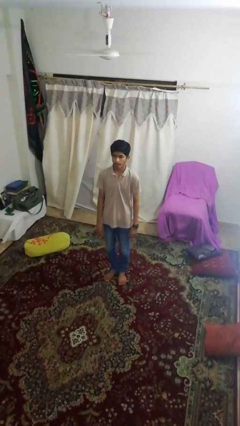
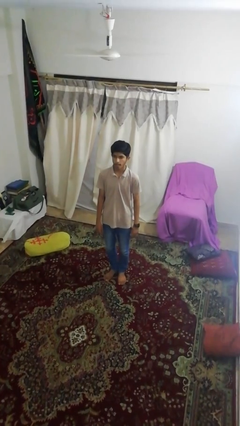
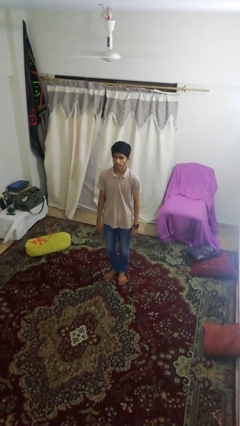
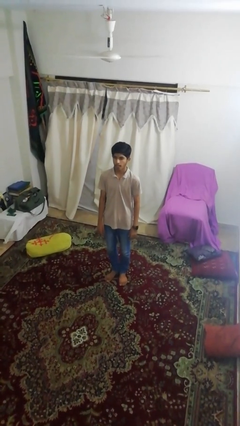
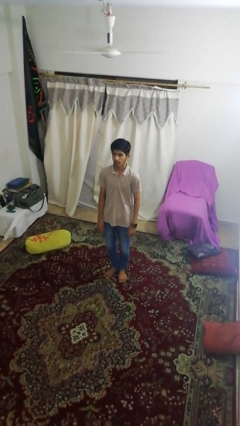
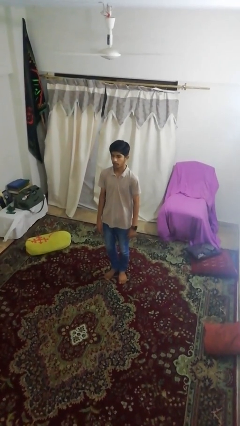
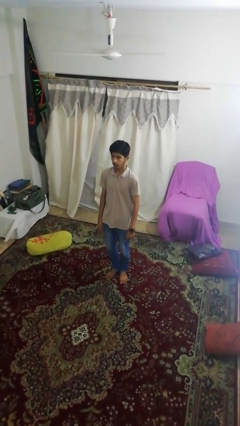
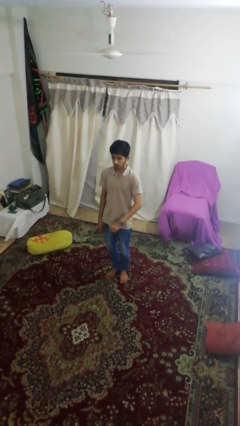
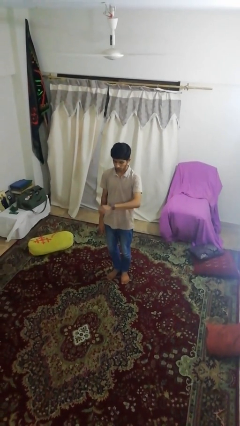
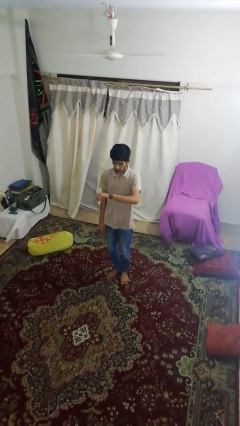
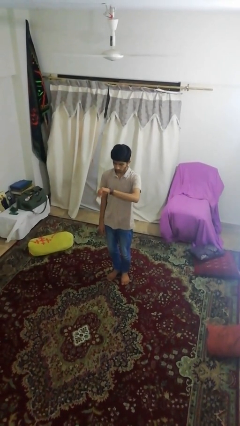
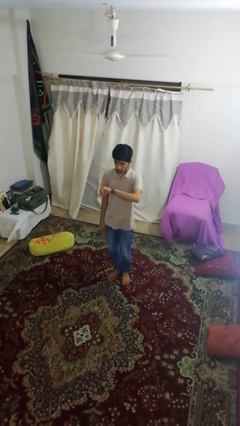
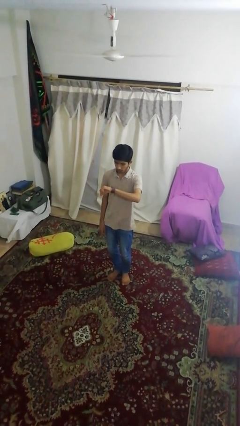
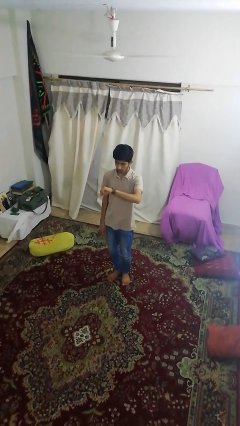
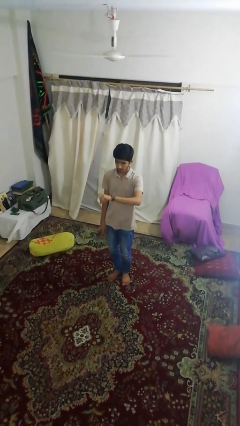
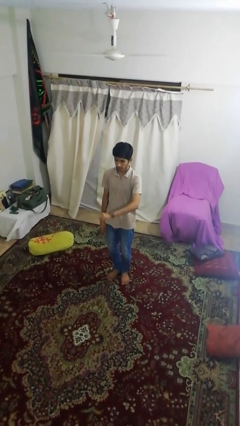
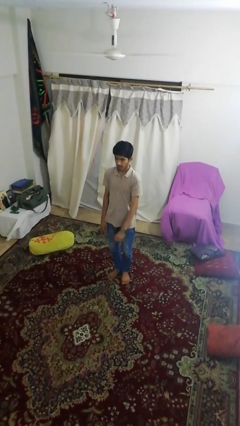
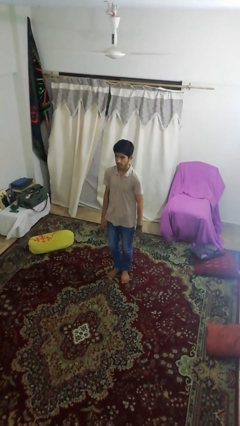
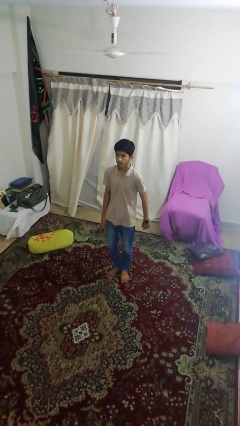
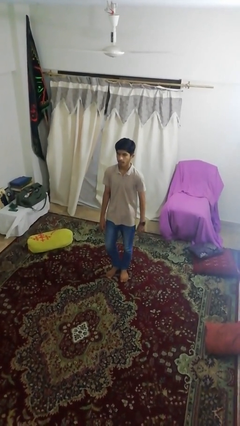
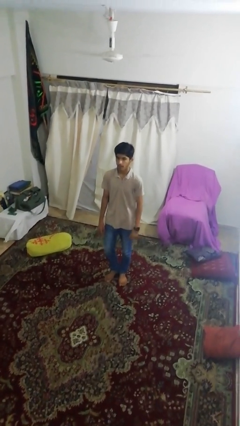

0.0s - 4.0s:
person looks at wristwatch

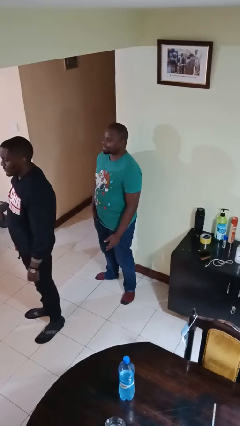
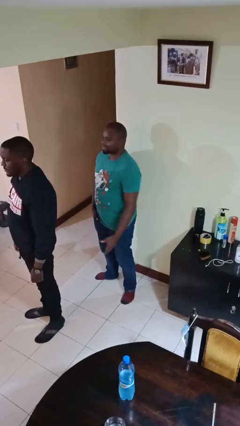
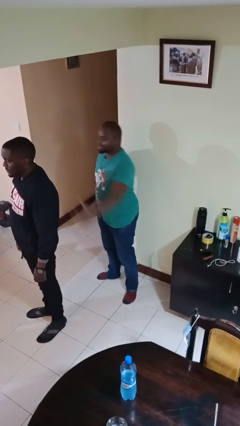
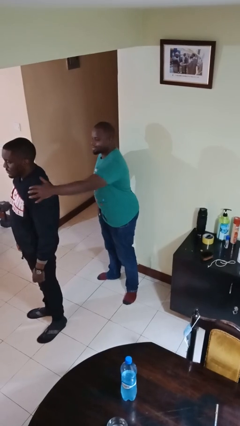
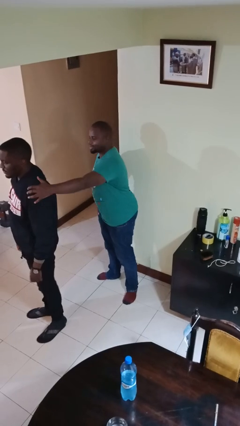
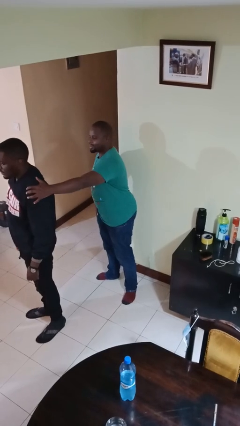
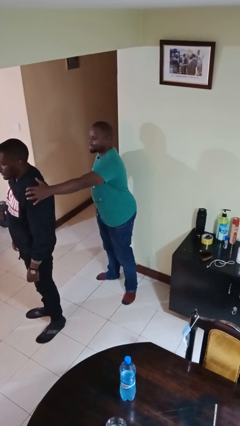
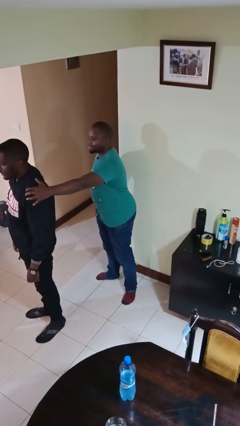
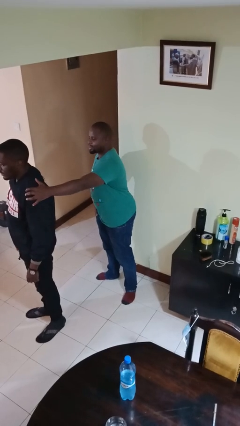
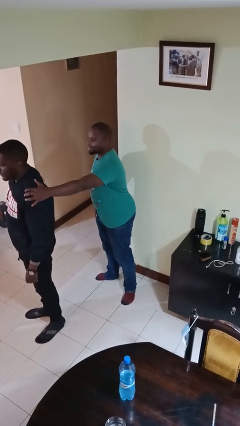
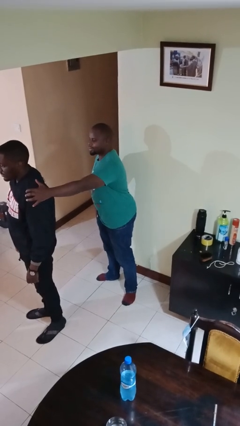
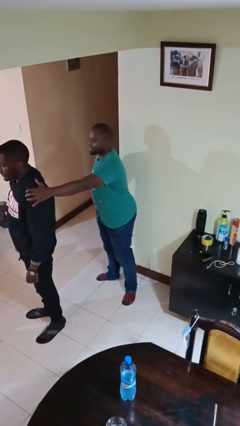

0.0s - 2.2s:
person grabs person by shoulder

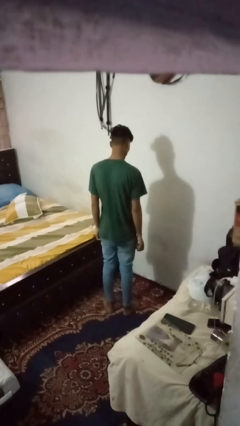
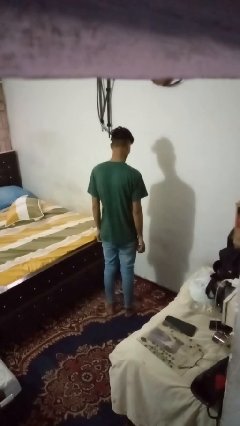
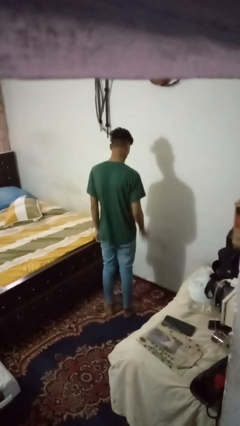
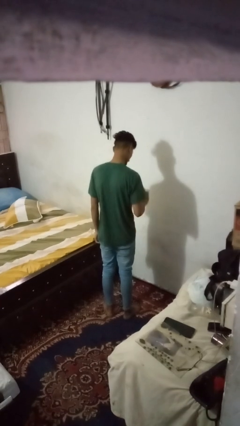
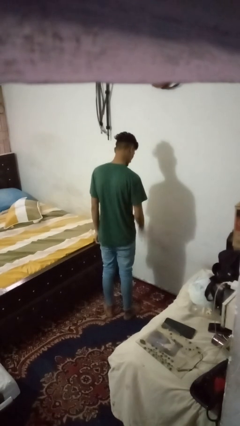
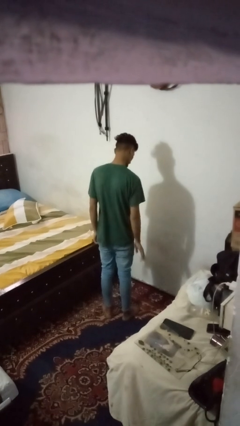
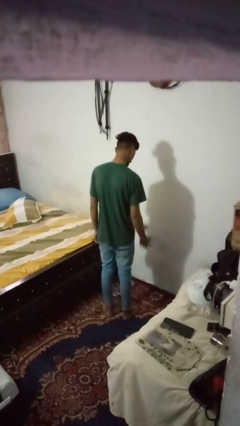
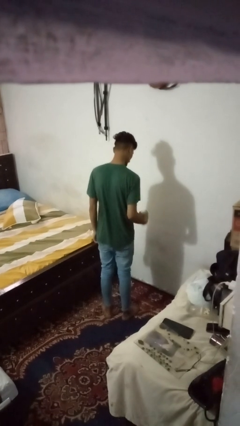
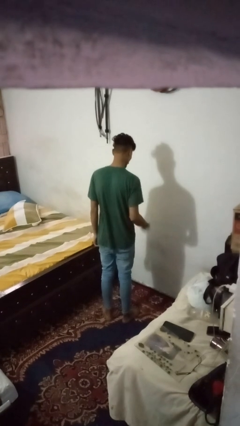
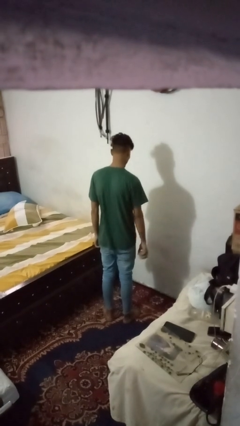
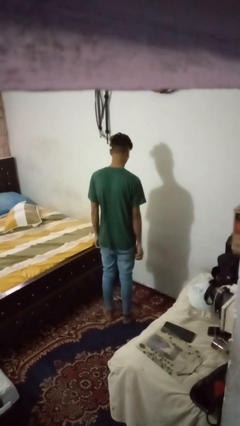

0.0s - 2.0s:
person bounces ball on floor

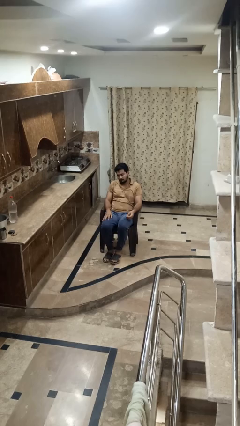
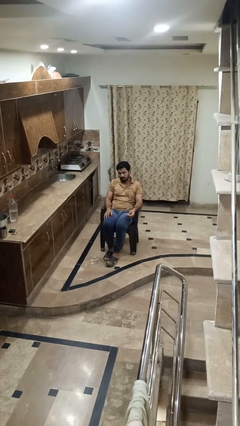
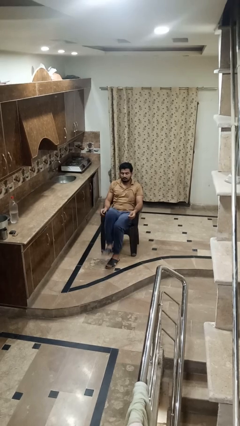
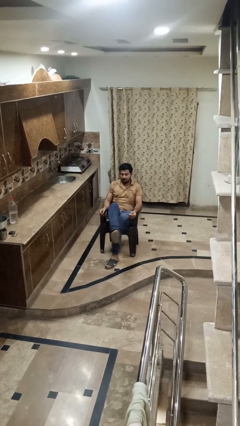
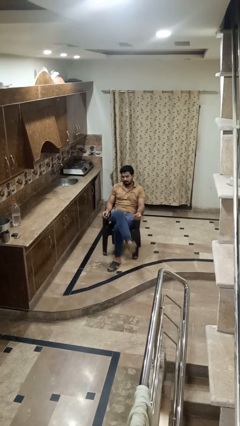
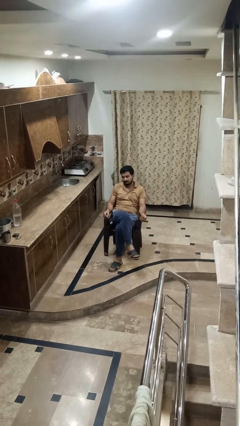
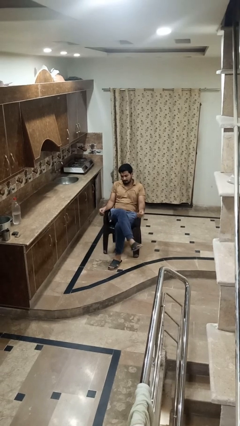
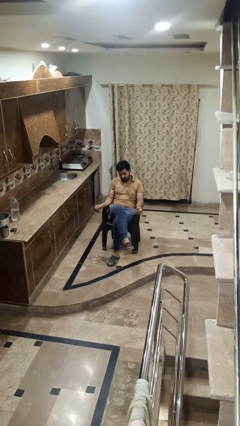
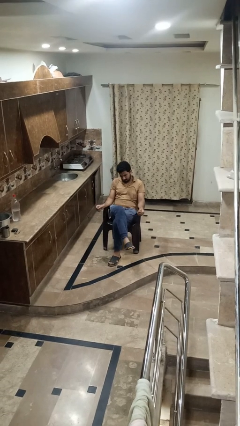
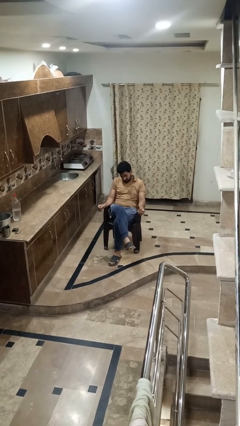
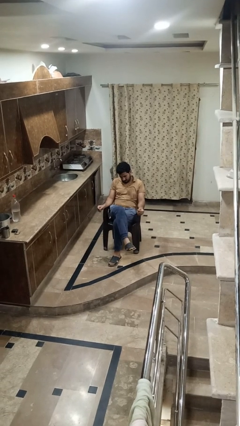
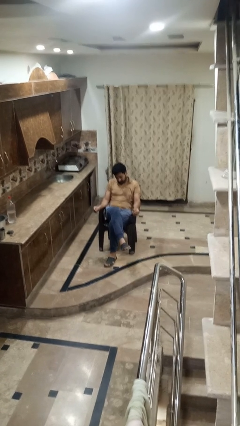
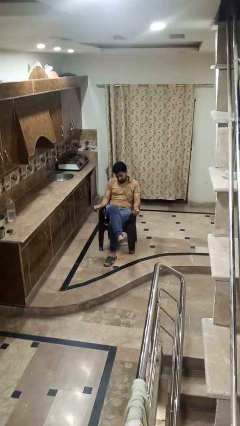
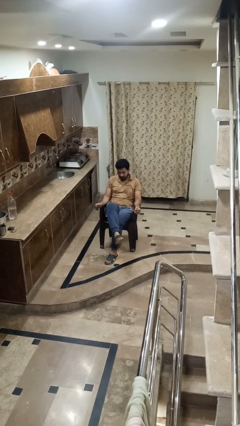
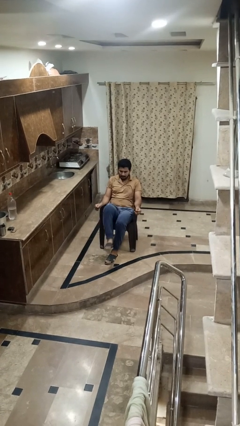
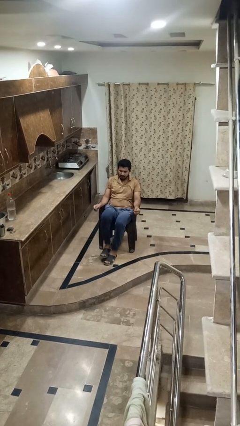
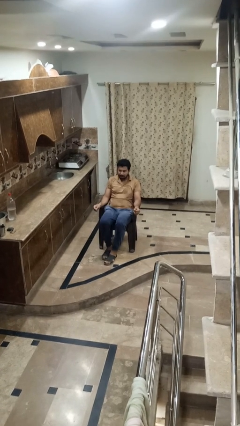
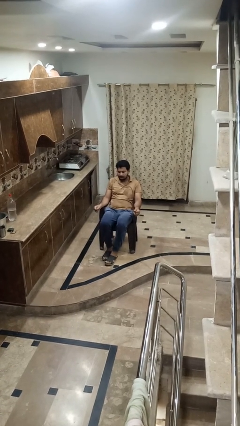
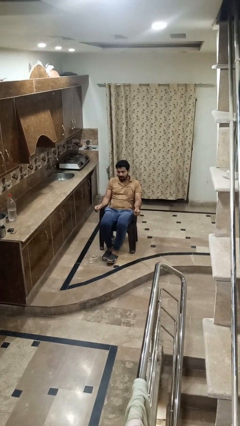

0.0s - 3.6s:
person crosses legs

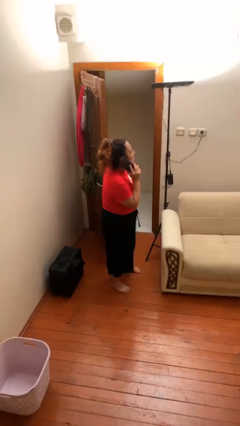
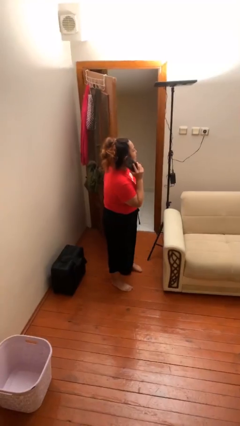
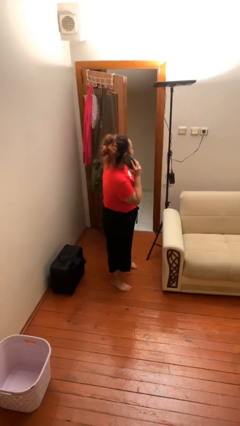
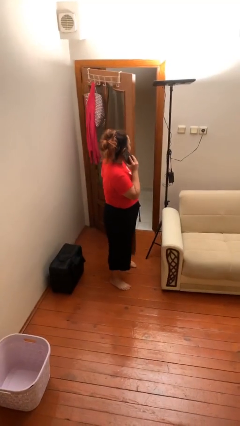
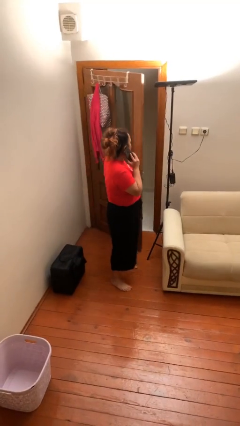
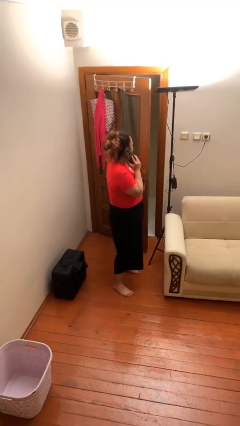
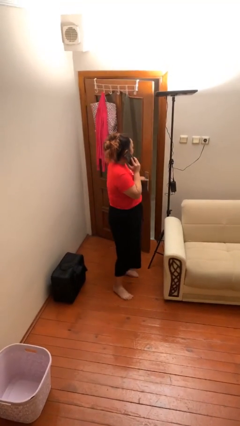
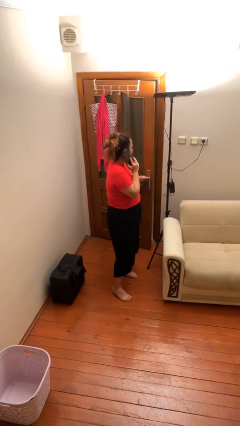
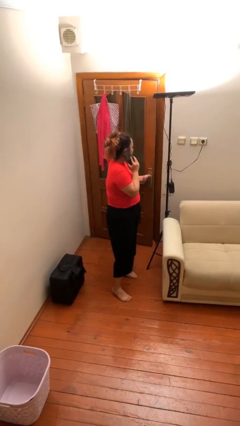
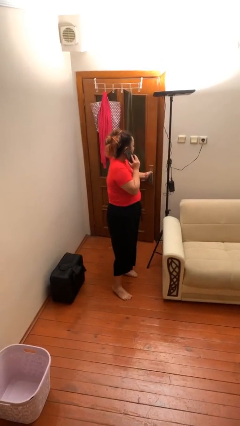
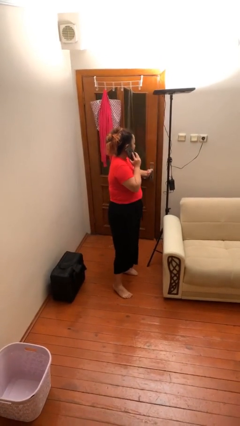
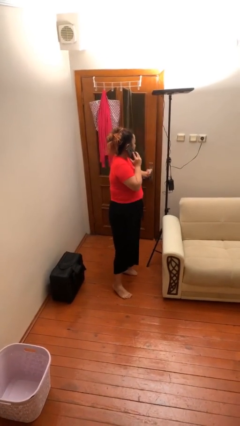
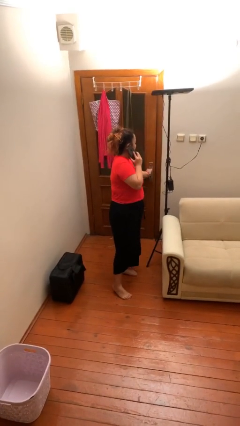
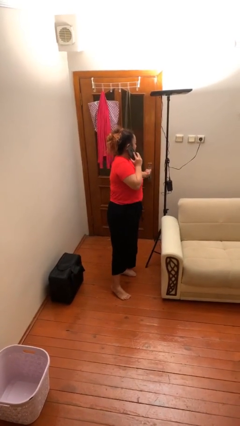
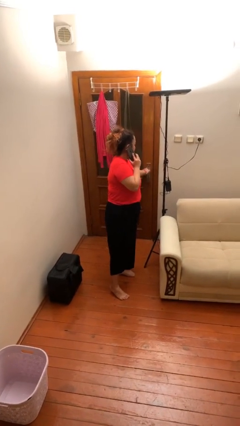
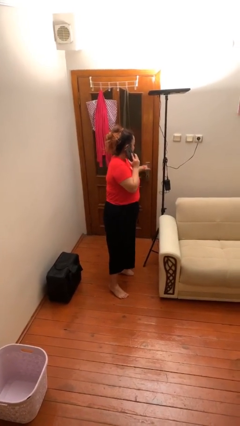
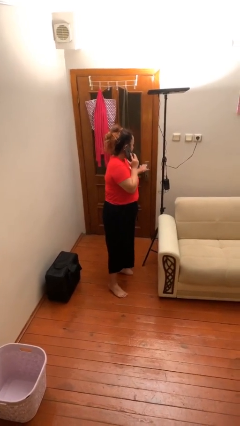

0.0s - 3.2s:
person closes facility door

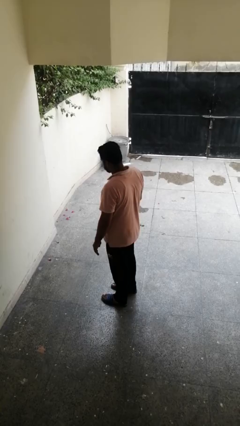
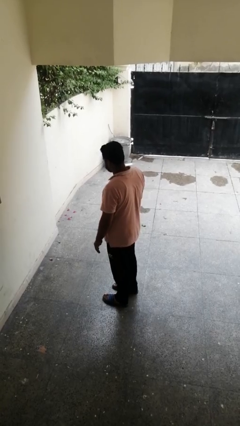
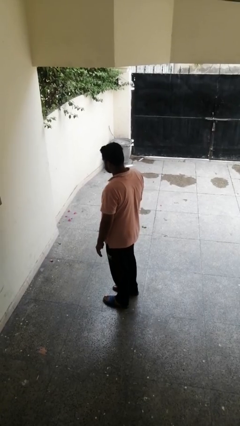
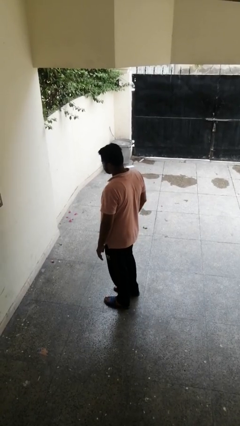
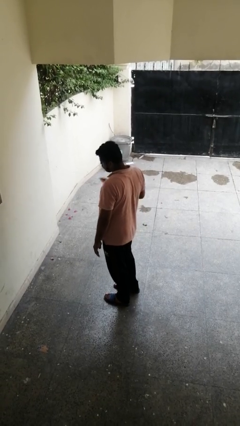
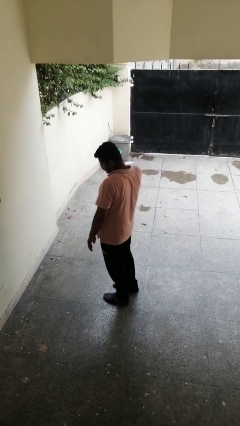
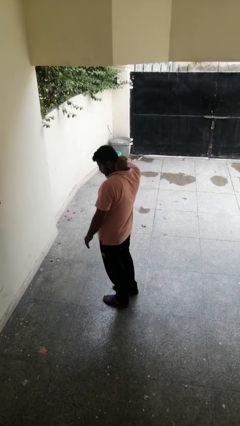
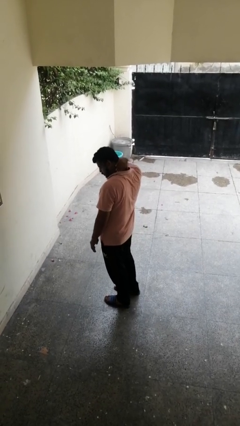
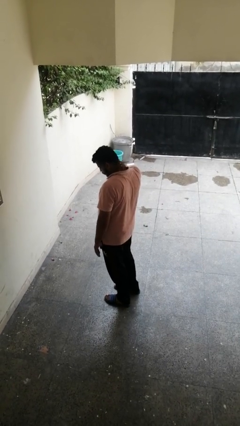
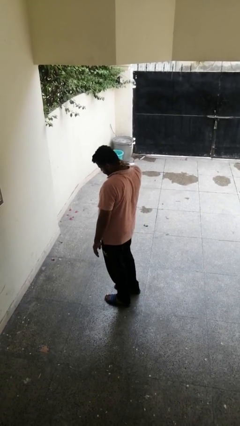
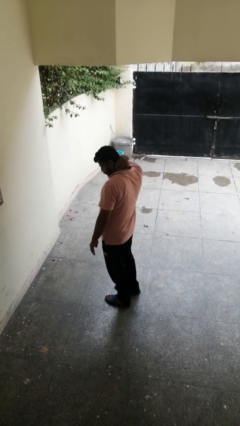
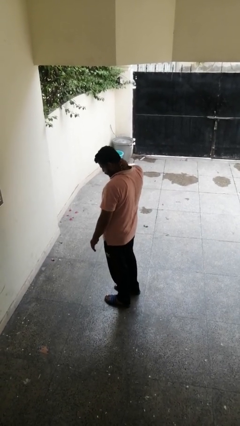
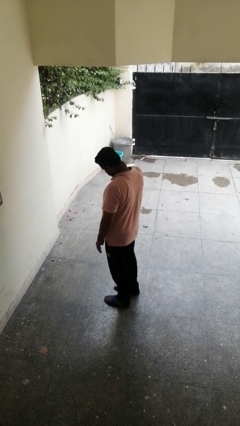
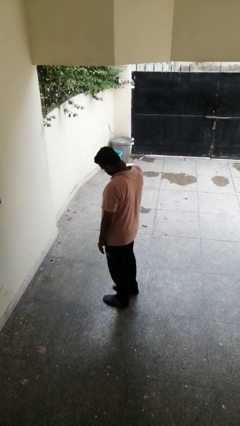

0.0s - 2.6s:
person rubs neck
